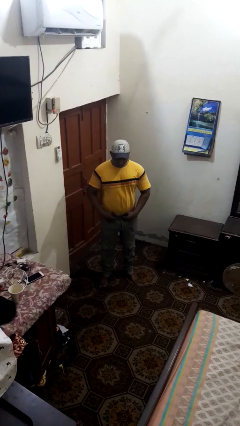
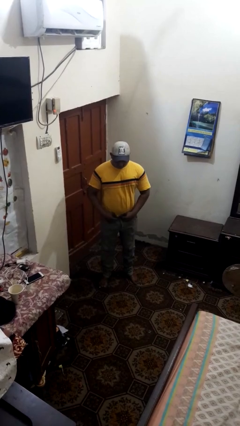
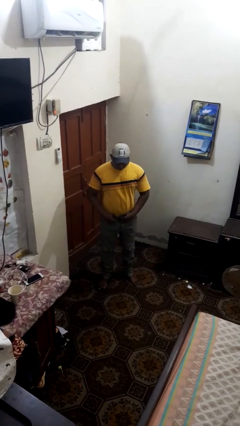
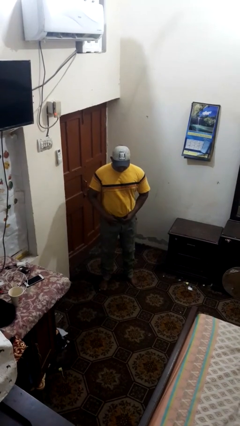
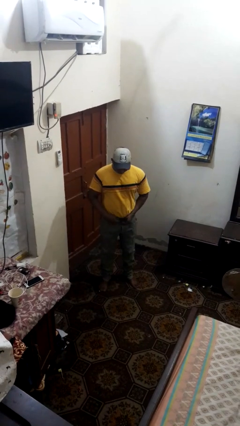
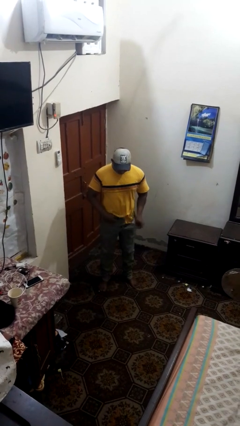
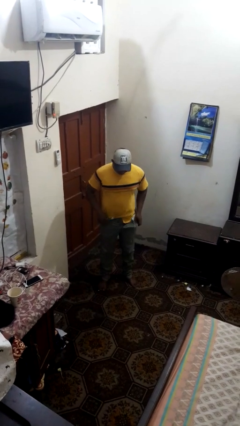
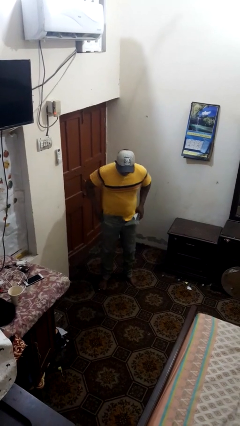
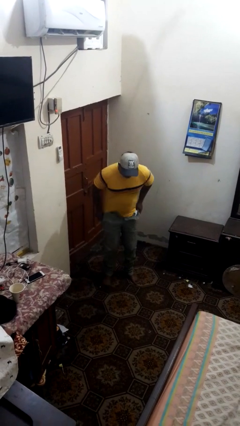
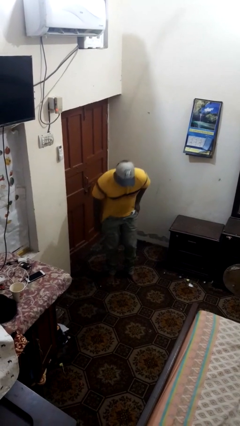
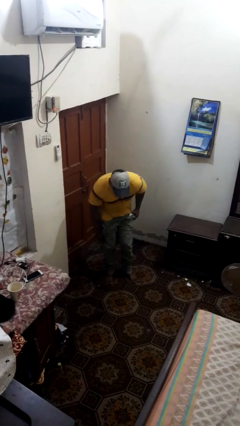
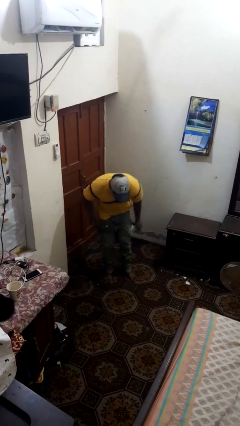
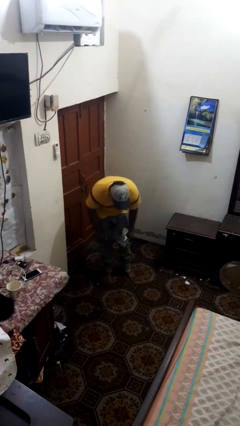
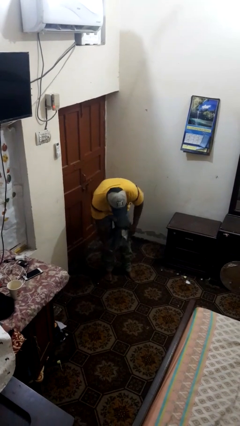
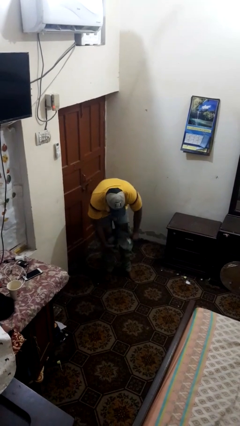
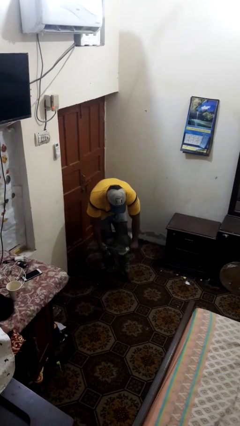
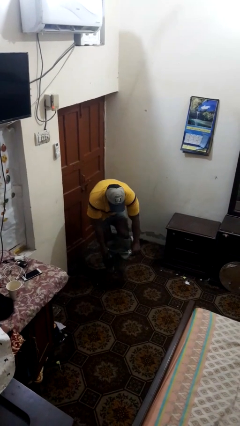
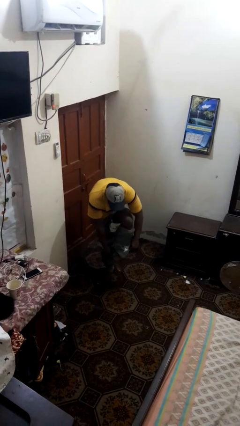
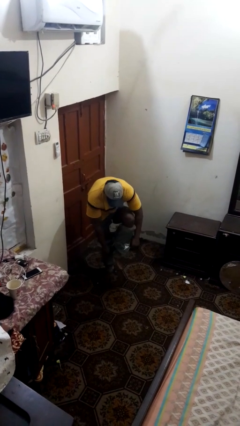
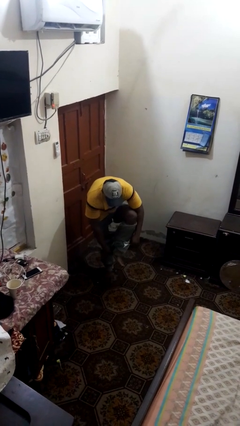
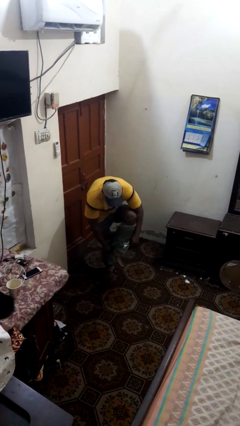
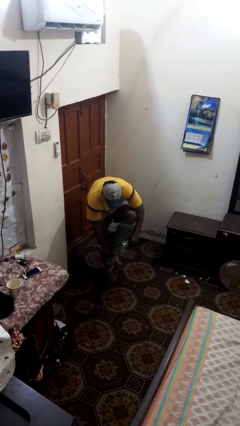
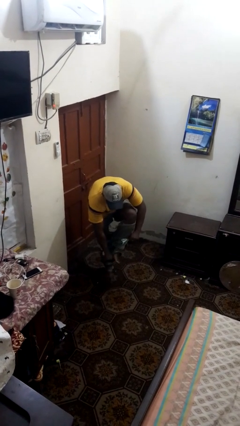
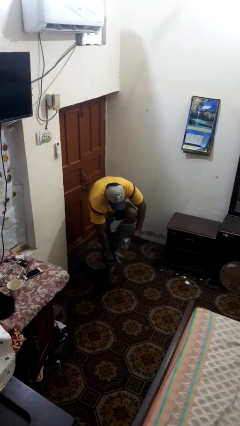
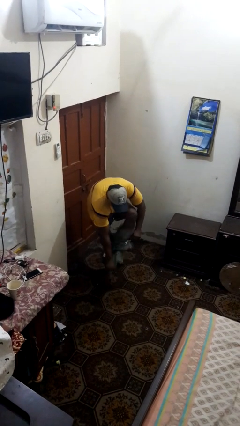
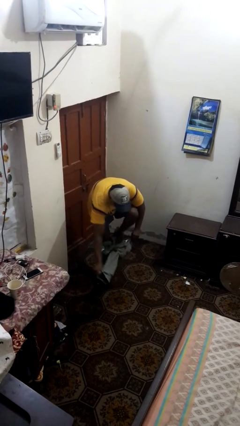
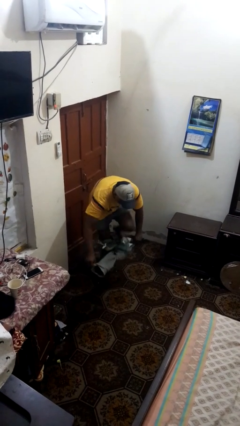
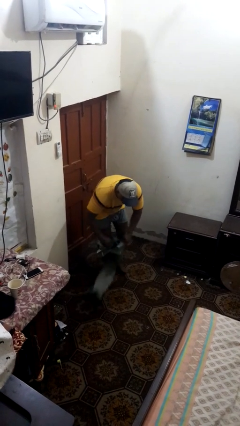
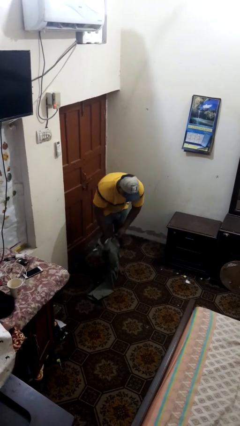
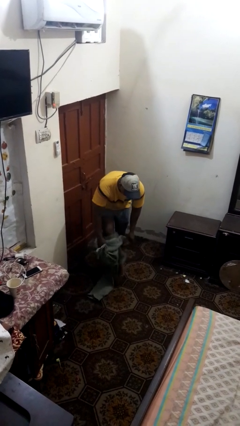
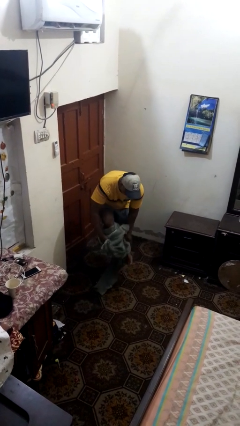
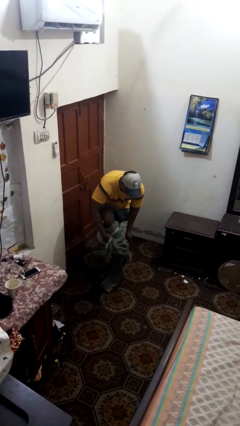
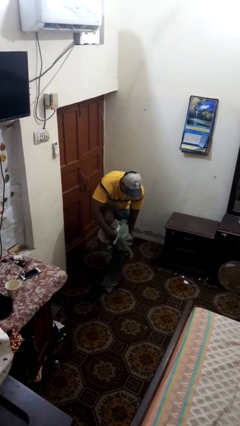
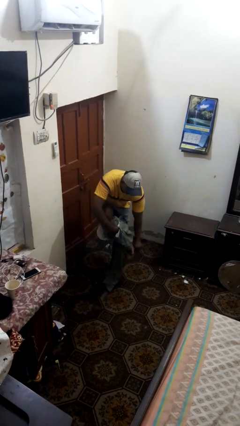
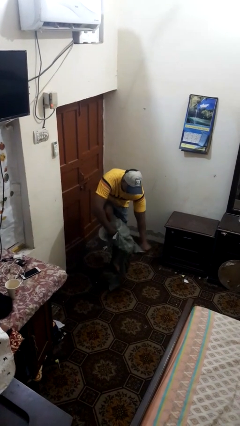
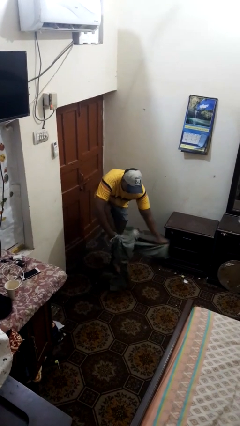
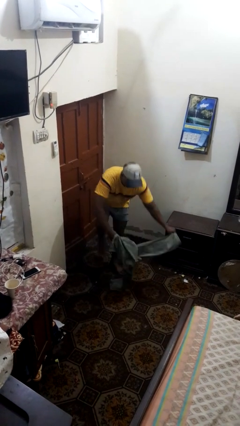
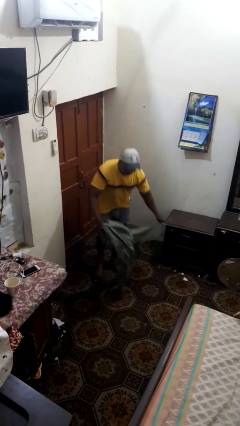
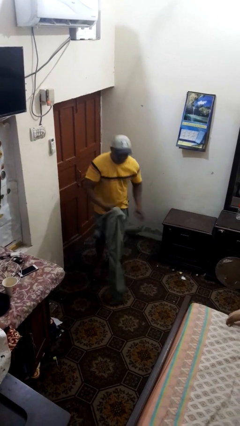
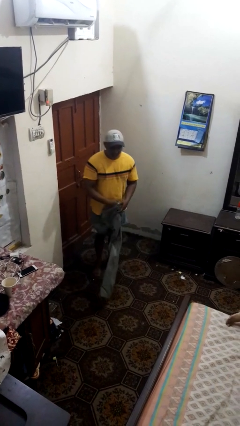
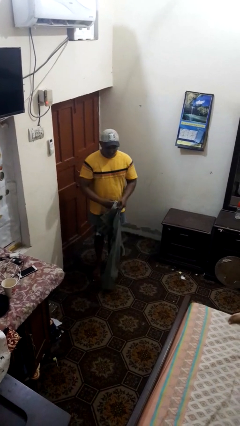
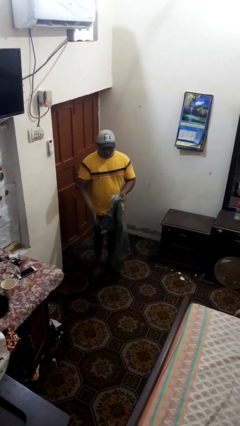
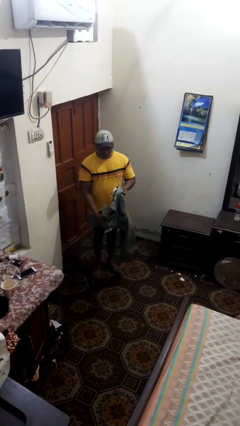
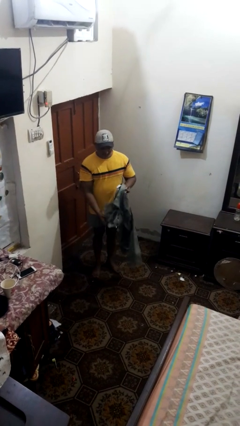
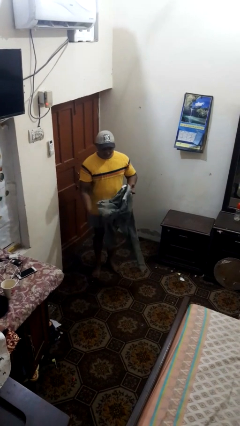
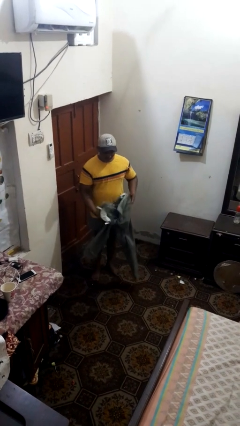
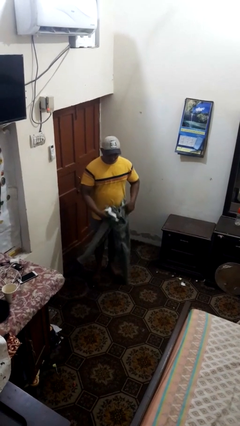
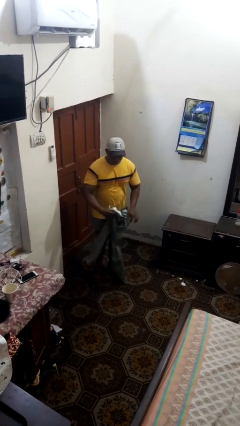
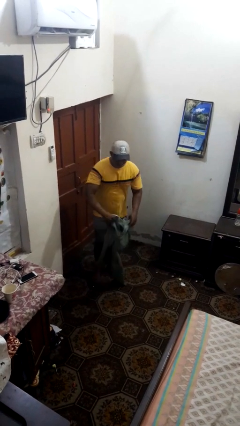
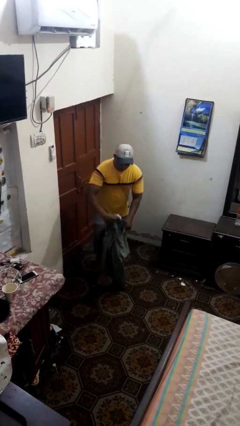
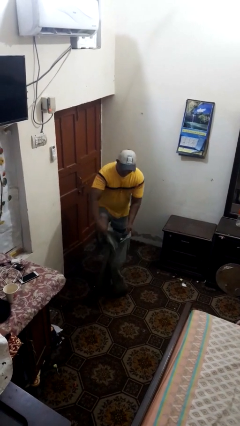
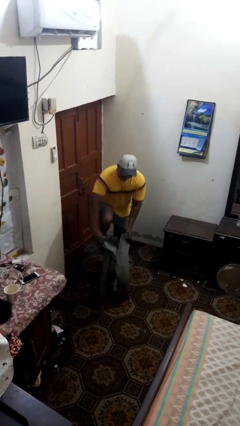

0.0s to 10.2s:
person takes off pants

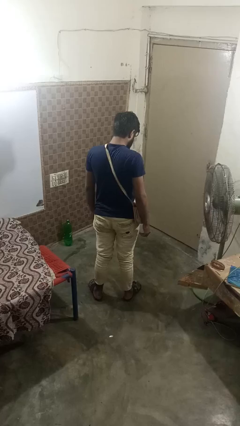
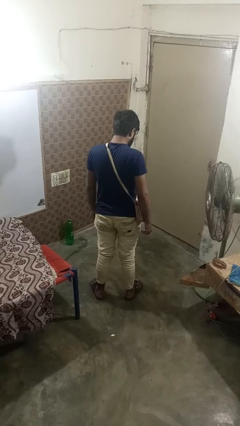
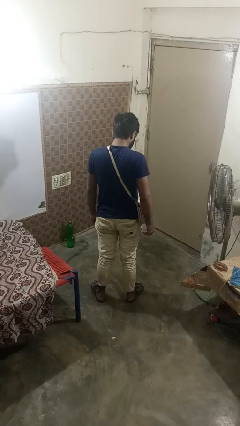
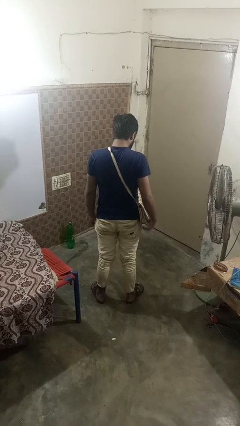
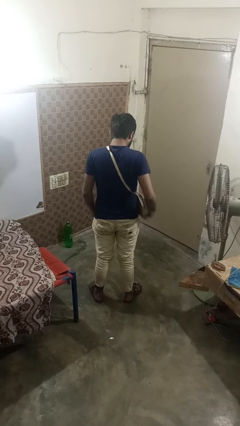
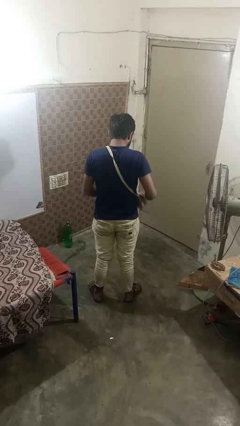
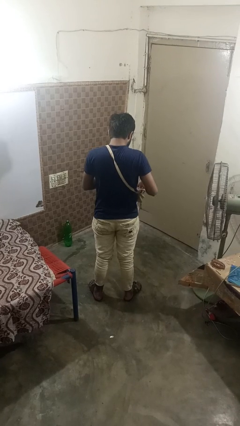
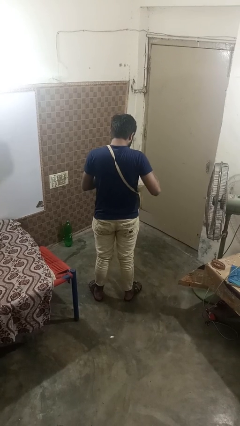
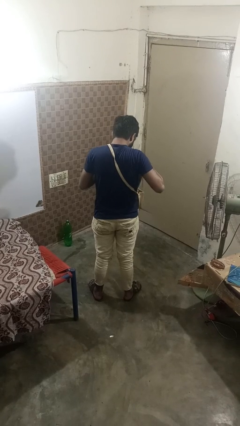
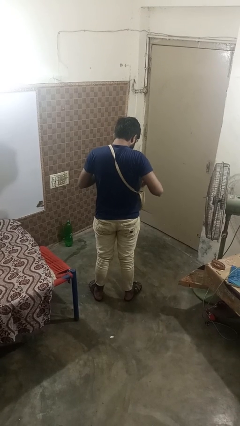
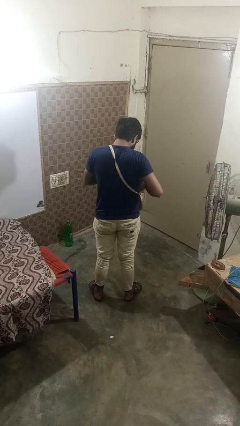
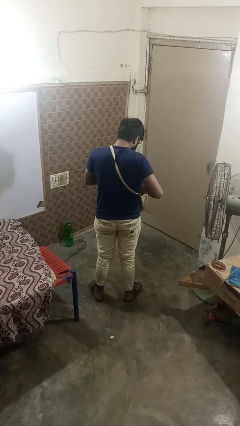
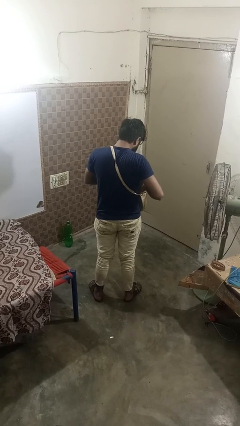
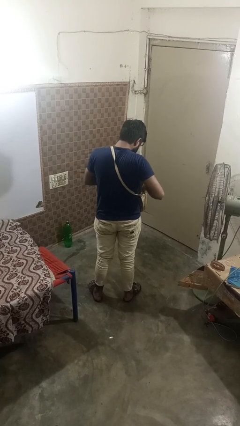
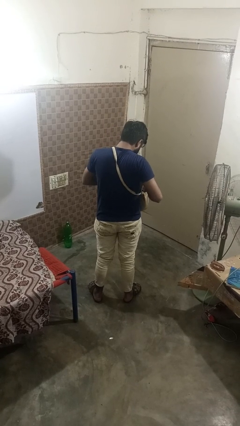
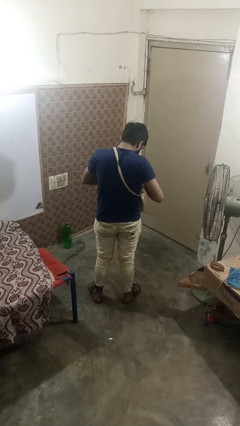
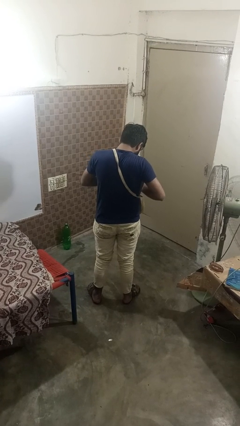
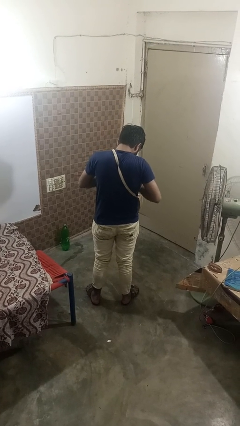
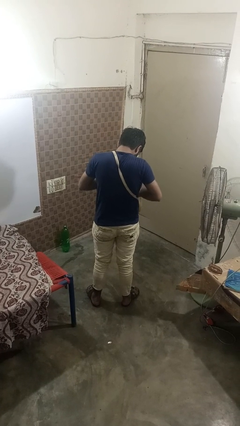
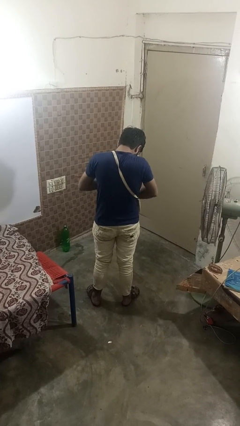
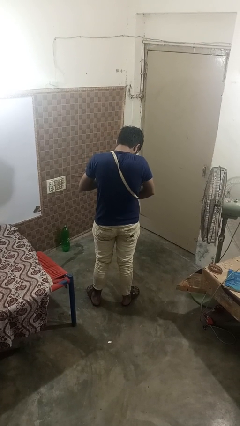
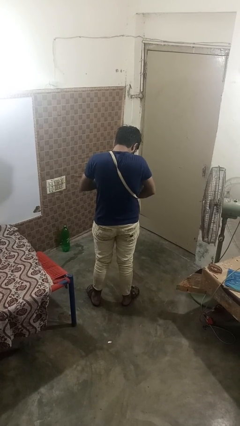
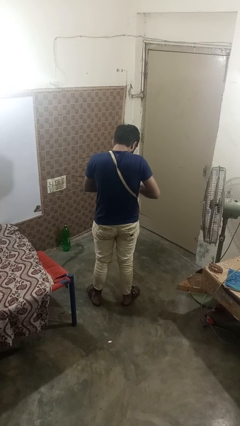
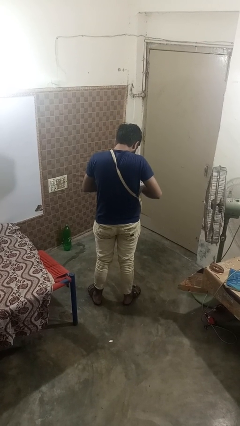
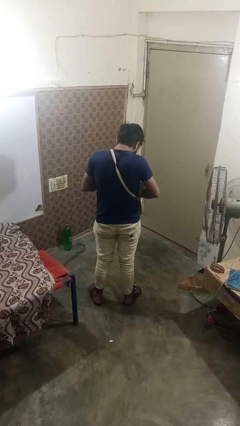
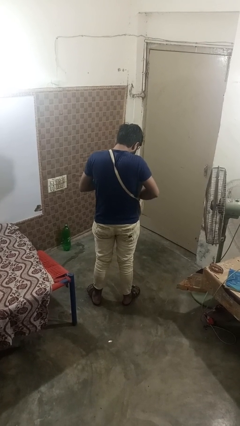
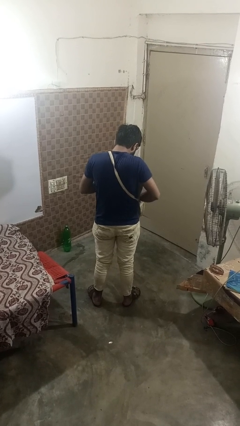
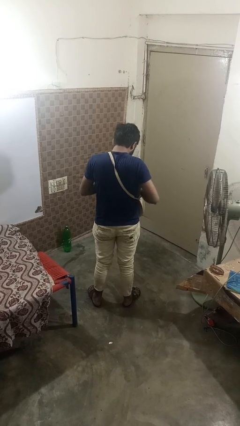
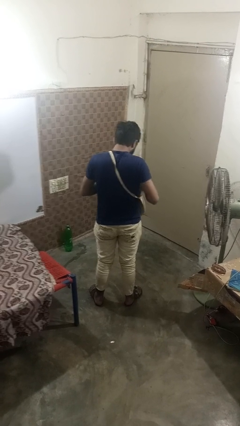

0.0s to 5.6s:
person searches in purse

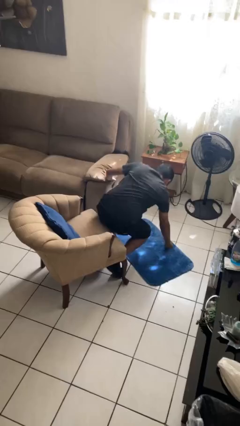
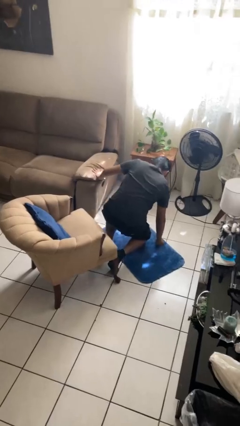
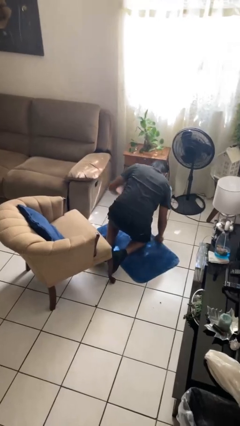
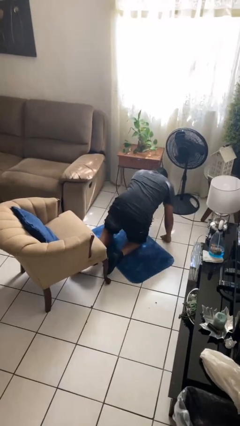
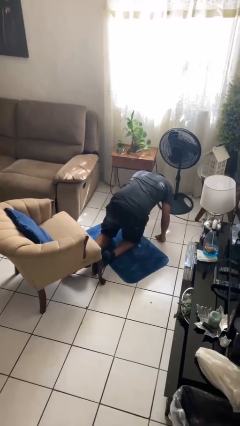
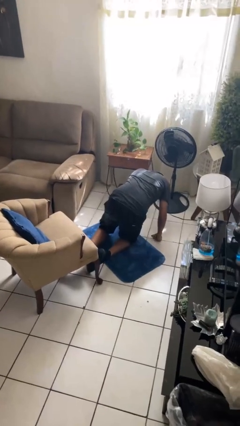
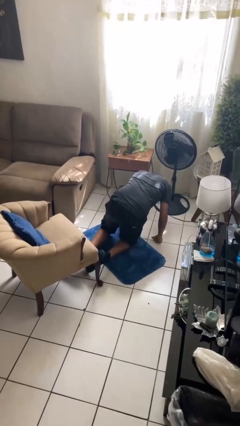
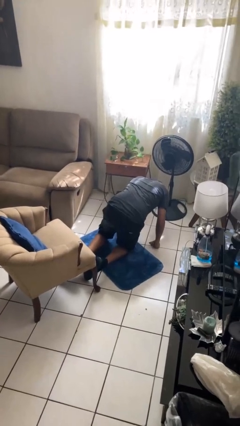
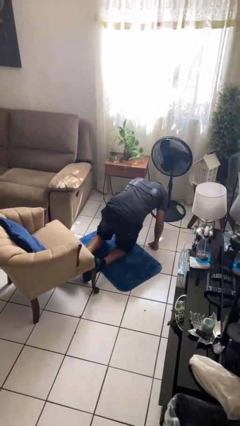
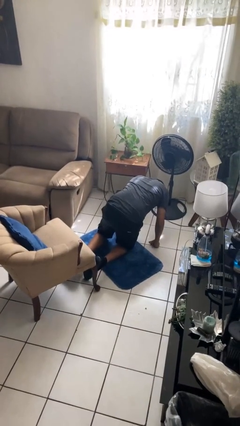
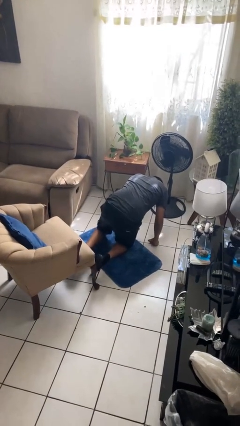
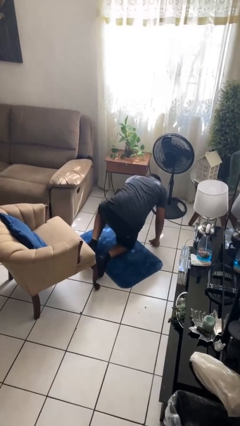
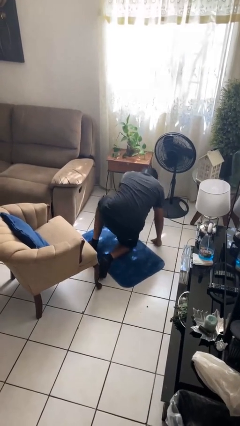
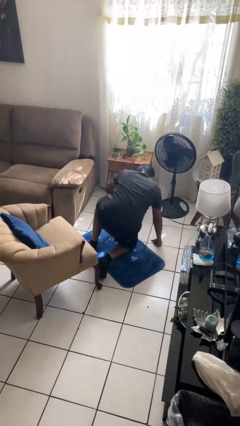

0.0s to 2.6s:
person falls from chair
